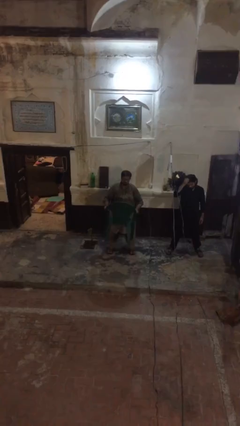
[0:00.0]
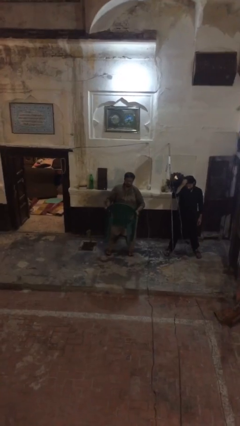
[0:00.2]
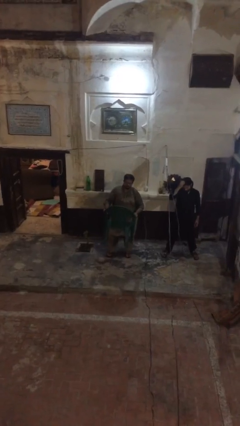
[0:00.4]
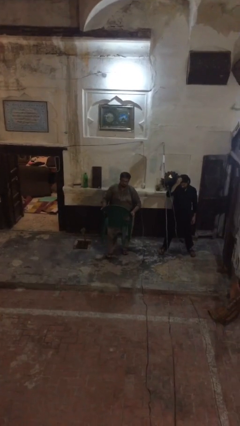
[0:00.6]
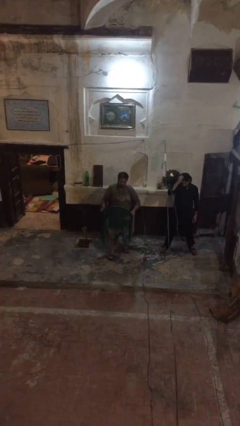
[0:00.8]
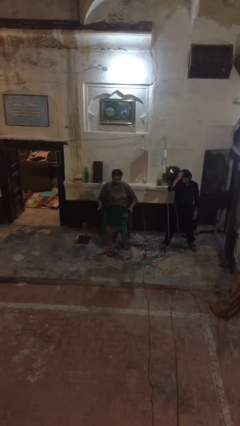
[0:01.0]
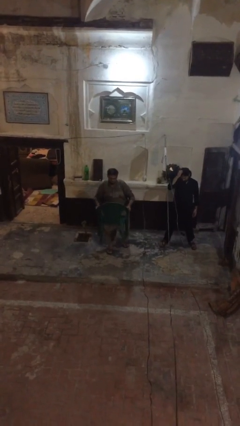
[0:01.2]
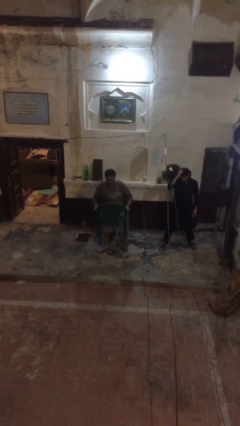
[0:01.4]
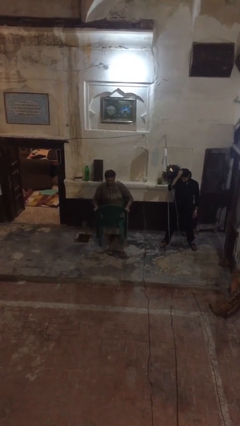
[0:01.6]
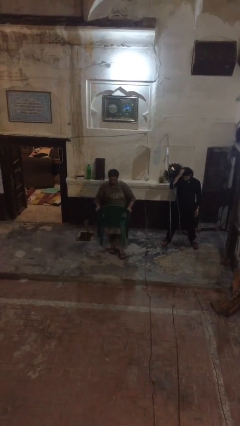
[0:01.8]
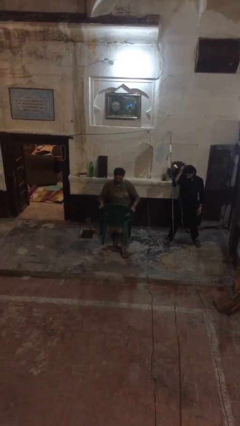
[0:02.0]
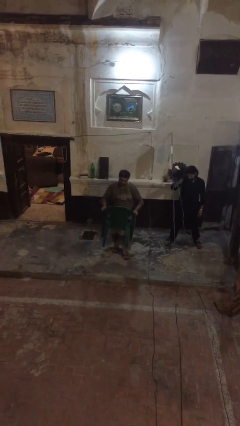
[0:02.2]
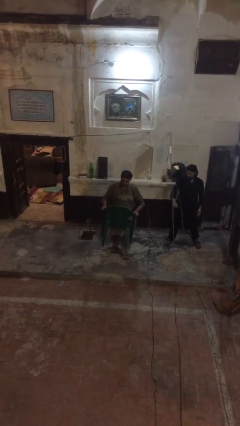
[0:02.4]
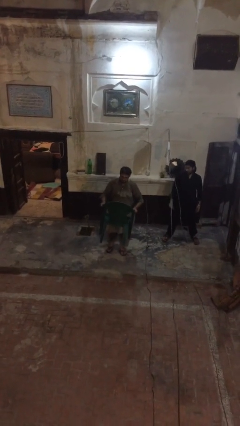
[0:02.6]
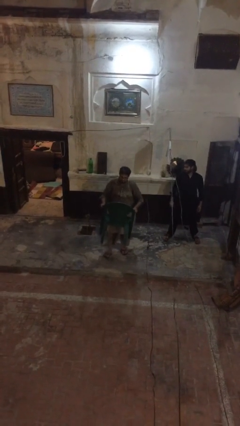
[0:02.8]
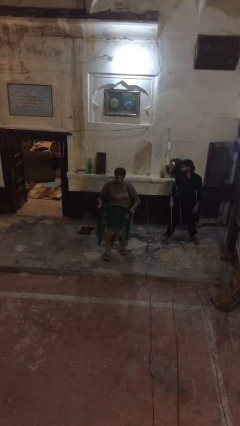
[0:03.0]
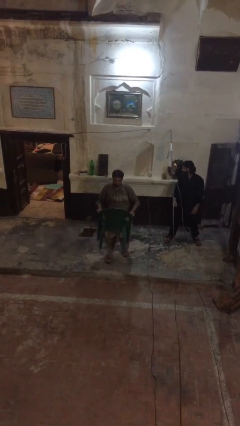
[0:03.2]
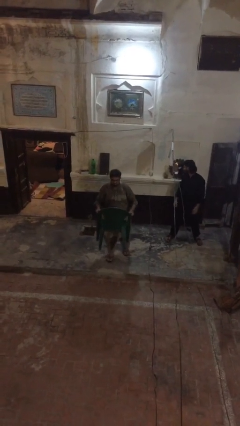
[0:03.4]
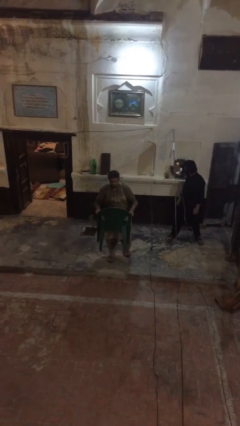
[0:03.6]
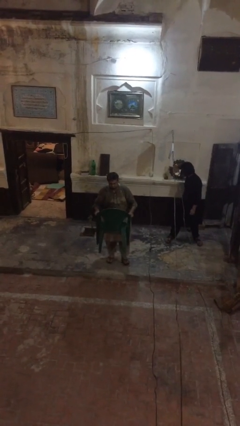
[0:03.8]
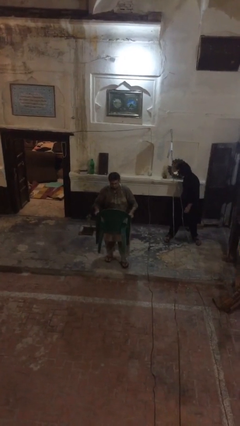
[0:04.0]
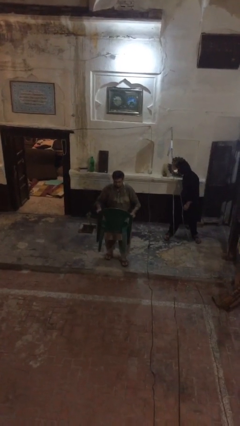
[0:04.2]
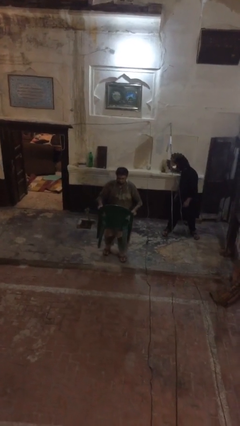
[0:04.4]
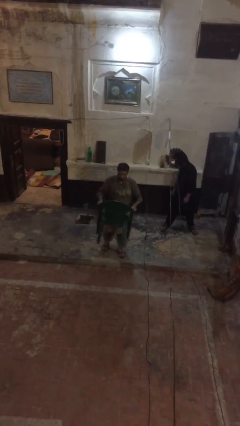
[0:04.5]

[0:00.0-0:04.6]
person carries heavy object

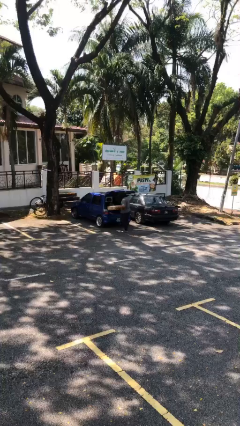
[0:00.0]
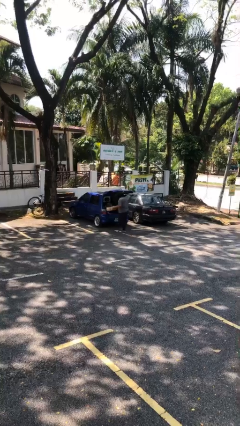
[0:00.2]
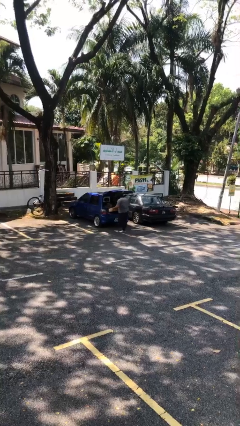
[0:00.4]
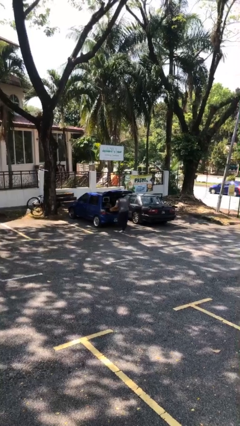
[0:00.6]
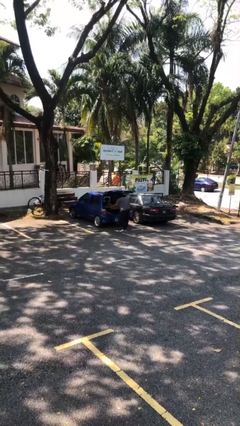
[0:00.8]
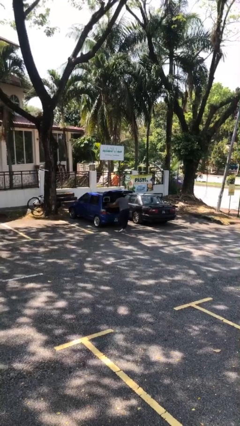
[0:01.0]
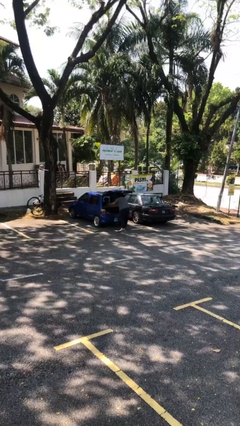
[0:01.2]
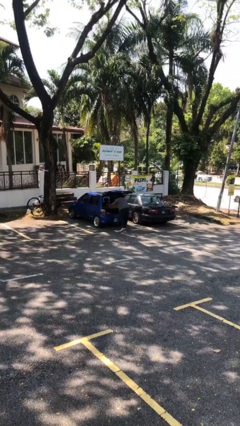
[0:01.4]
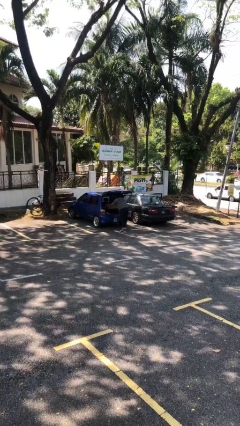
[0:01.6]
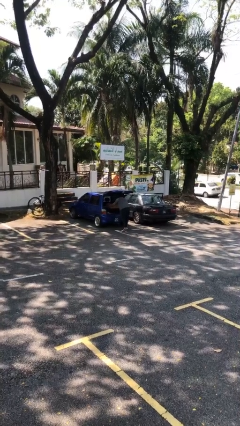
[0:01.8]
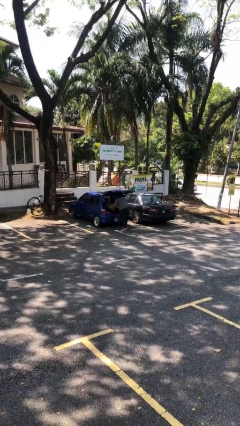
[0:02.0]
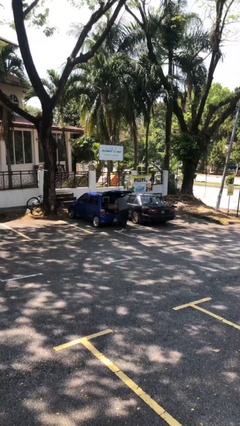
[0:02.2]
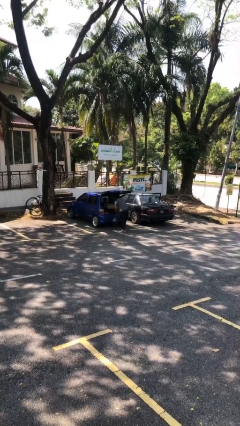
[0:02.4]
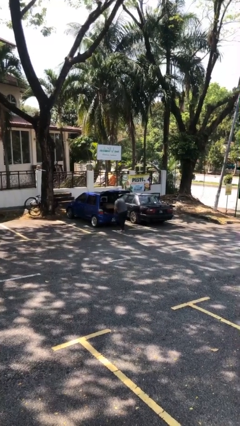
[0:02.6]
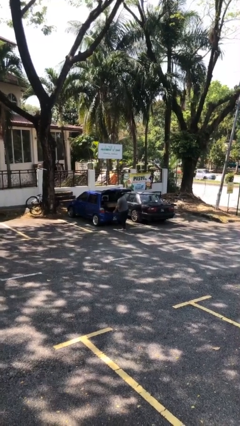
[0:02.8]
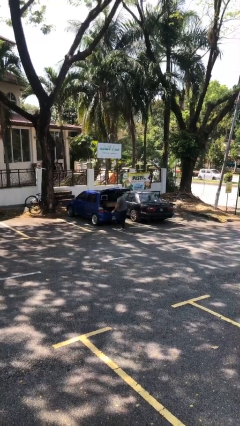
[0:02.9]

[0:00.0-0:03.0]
person loads car

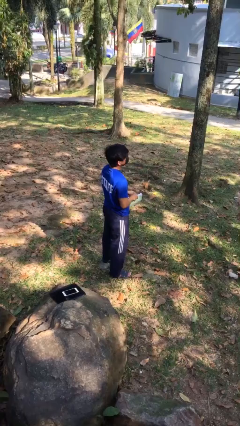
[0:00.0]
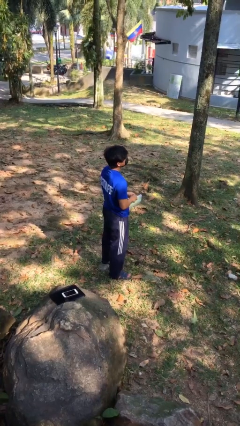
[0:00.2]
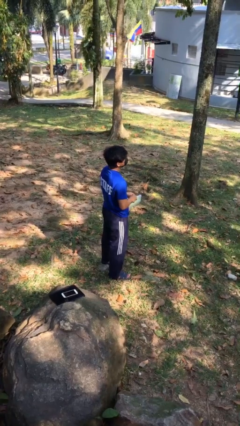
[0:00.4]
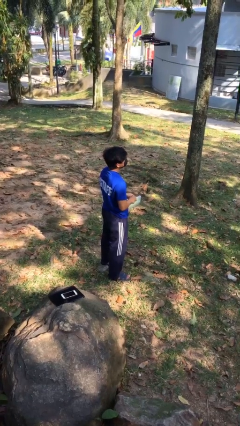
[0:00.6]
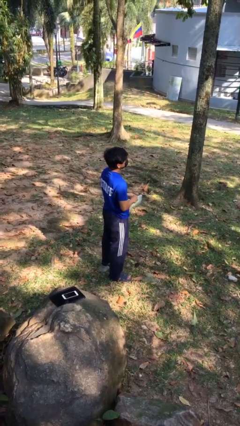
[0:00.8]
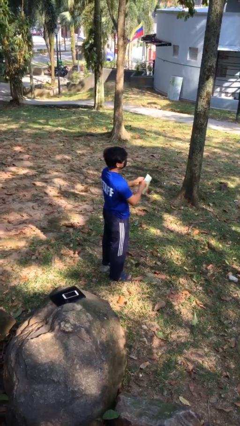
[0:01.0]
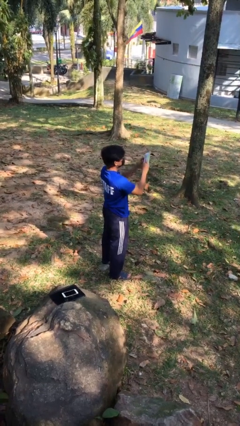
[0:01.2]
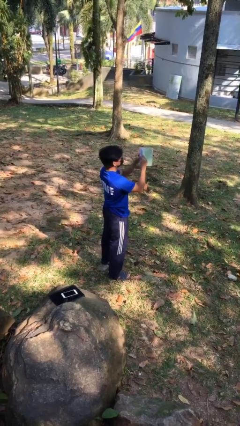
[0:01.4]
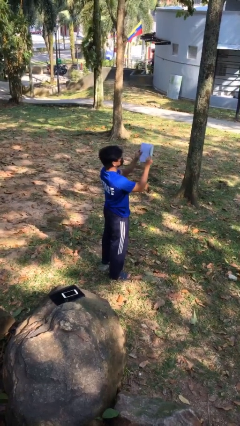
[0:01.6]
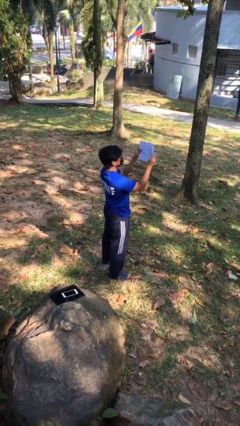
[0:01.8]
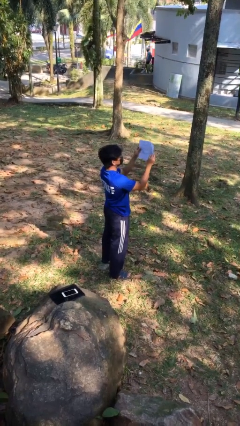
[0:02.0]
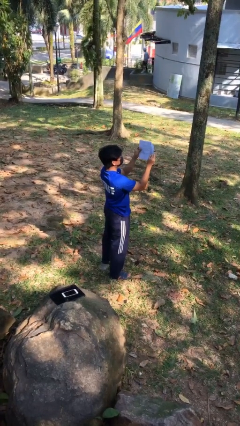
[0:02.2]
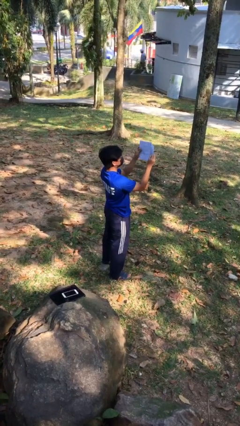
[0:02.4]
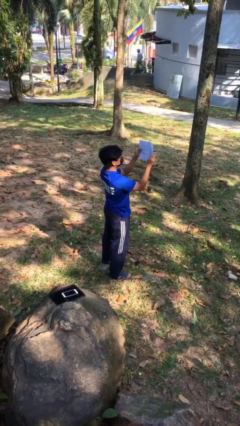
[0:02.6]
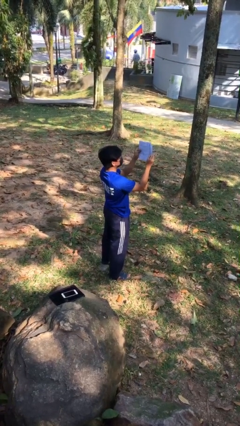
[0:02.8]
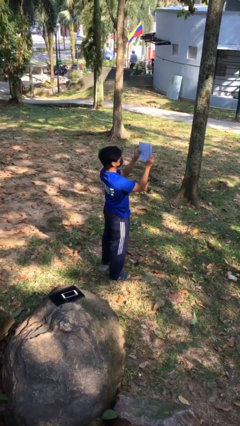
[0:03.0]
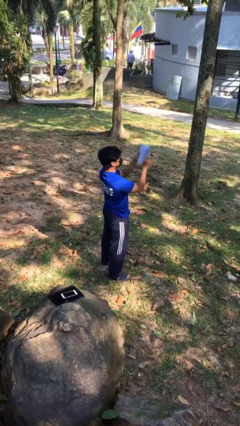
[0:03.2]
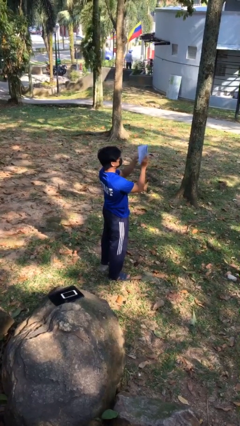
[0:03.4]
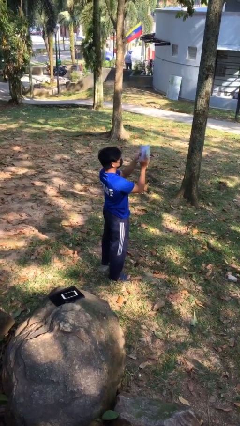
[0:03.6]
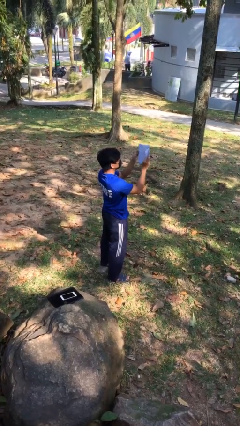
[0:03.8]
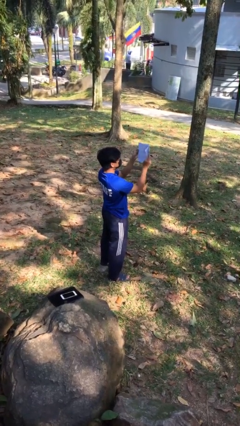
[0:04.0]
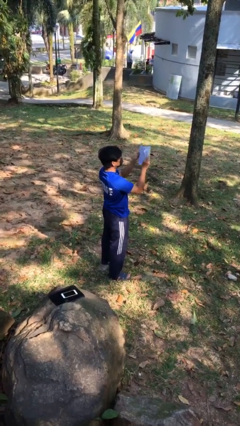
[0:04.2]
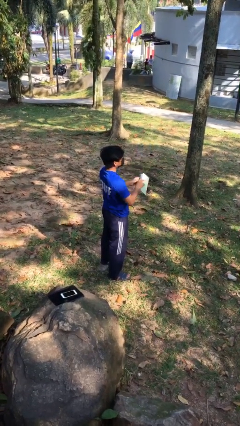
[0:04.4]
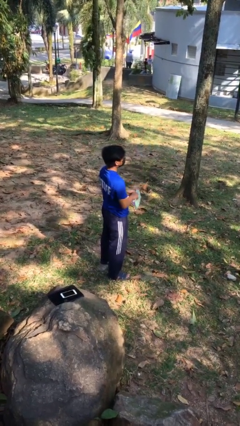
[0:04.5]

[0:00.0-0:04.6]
person reads document

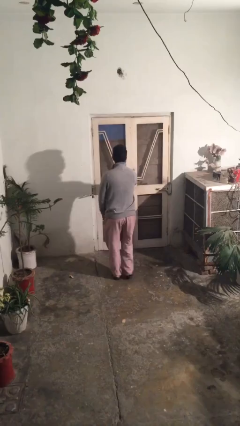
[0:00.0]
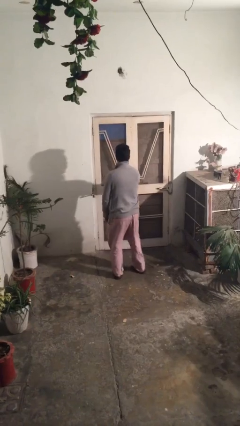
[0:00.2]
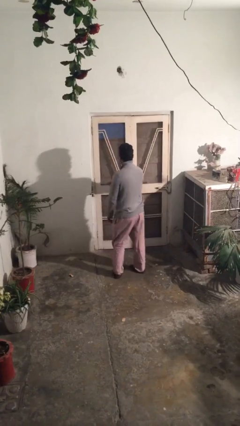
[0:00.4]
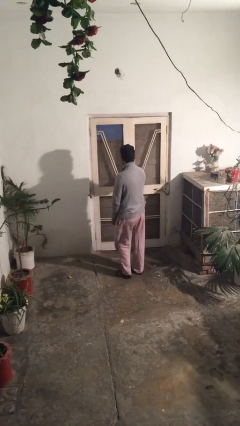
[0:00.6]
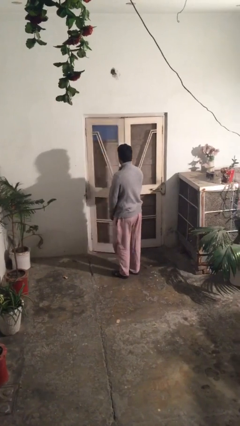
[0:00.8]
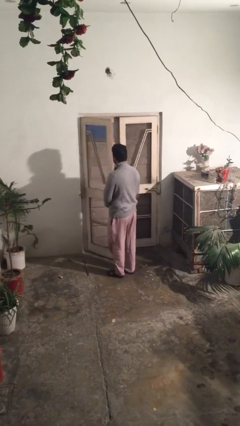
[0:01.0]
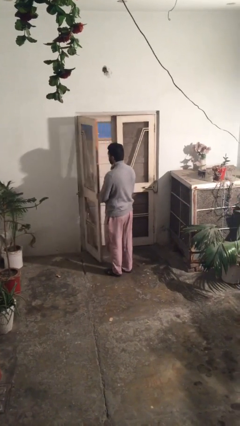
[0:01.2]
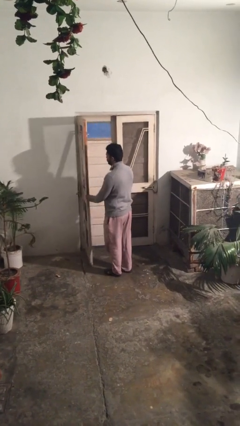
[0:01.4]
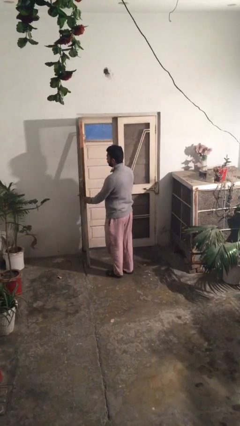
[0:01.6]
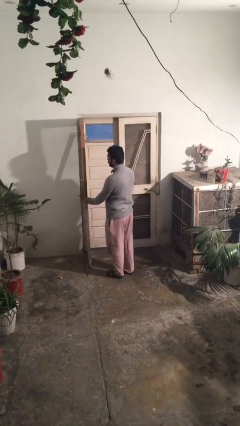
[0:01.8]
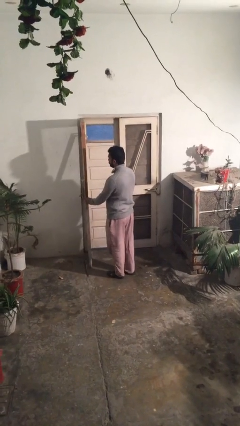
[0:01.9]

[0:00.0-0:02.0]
person opens facility door

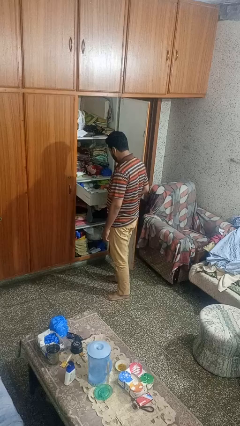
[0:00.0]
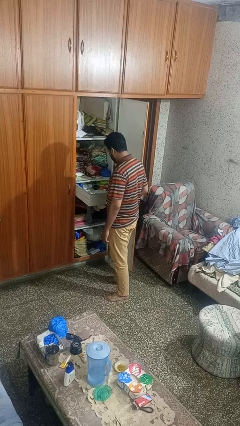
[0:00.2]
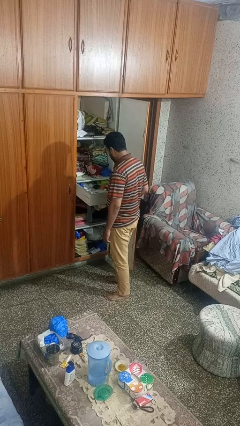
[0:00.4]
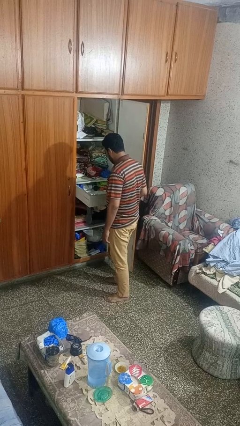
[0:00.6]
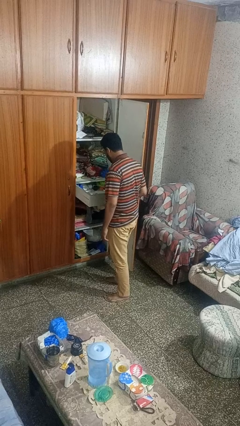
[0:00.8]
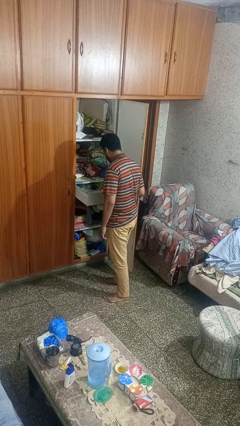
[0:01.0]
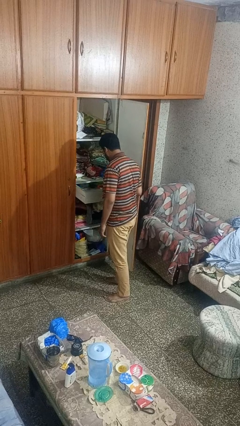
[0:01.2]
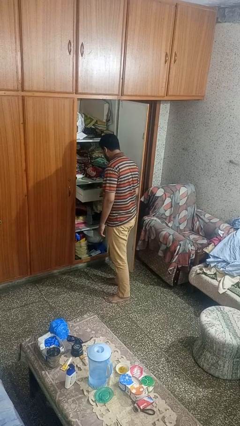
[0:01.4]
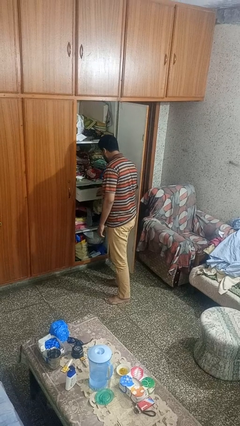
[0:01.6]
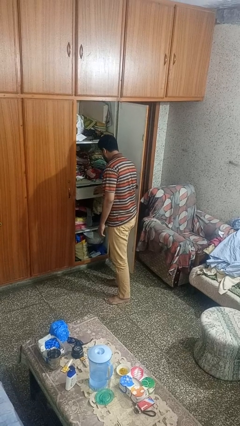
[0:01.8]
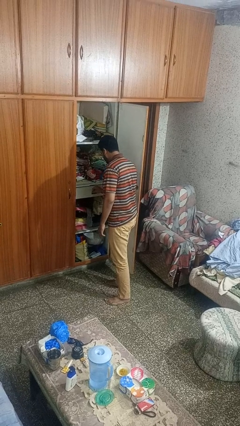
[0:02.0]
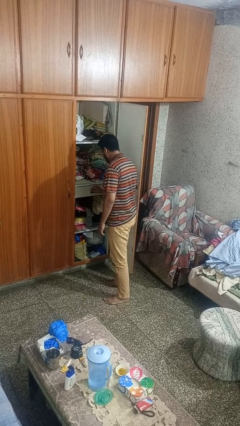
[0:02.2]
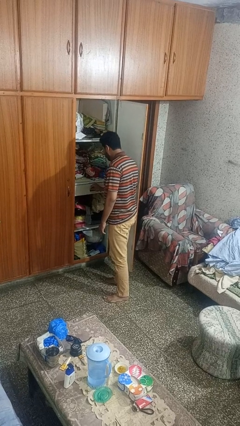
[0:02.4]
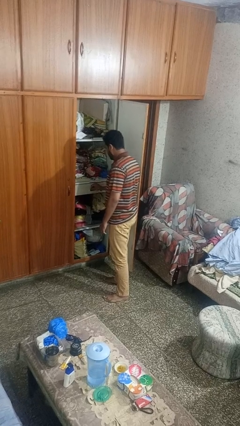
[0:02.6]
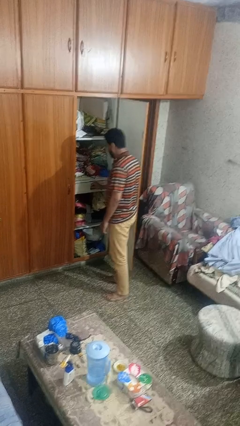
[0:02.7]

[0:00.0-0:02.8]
person closes dresser drawer

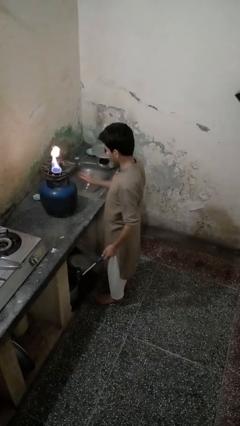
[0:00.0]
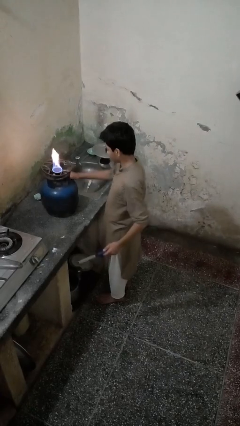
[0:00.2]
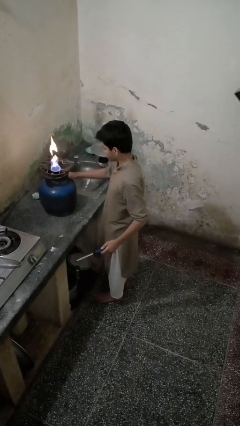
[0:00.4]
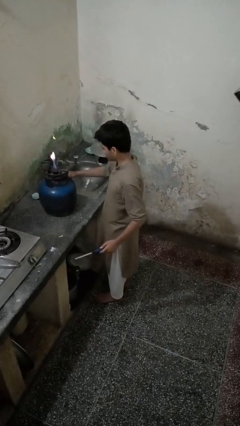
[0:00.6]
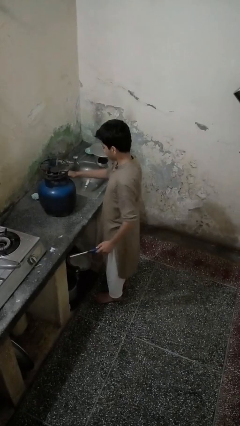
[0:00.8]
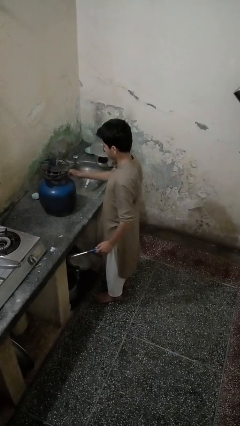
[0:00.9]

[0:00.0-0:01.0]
person turns off stovetop
